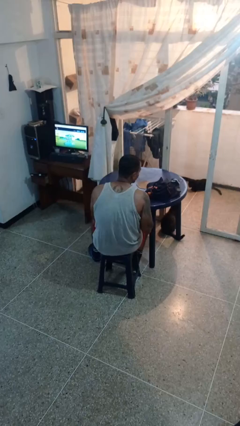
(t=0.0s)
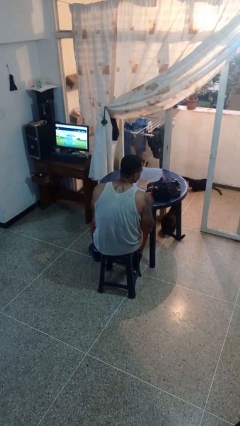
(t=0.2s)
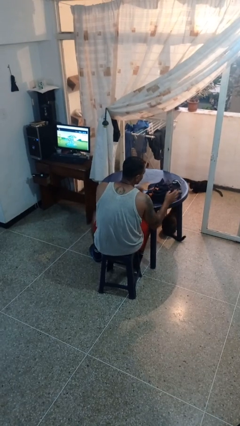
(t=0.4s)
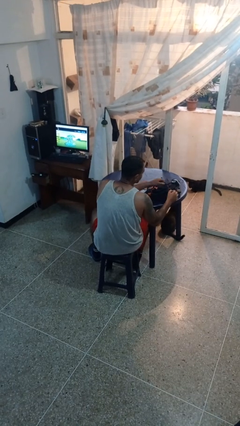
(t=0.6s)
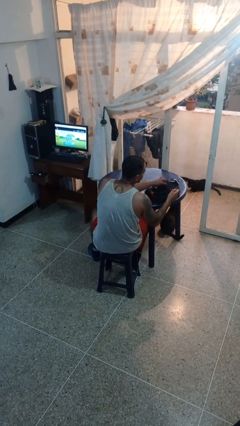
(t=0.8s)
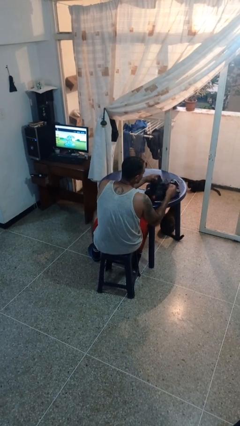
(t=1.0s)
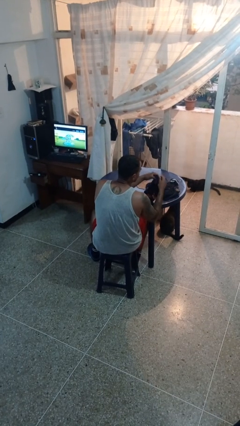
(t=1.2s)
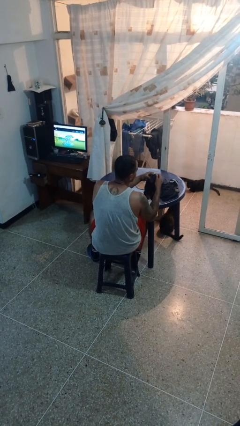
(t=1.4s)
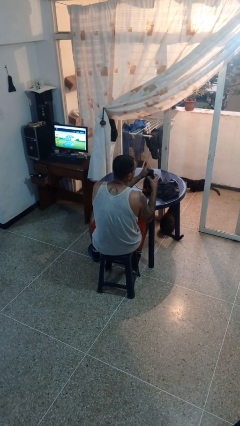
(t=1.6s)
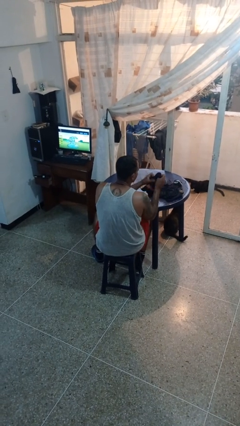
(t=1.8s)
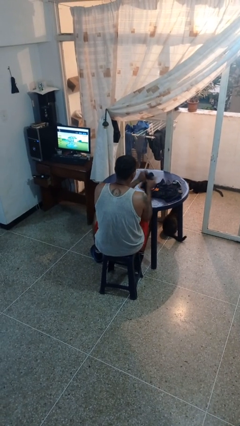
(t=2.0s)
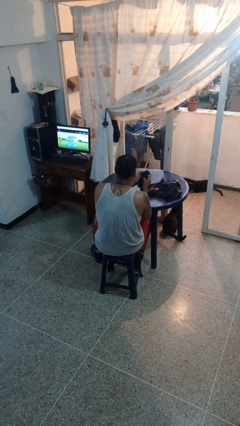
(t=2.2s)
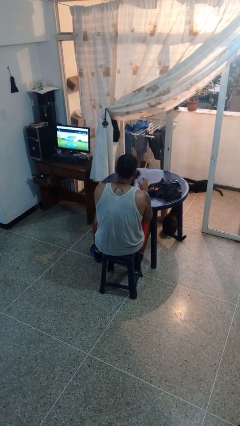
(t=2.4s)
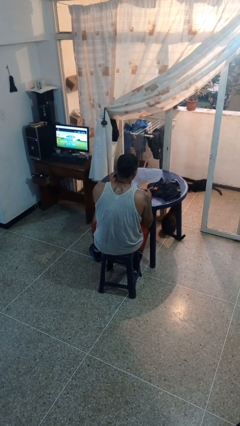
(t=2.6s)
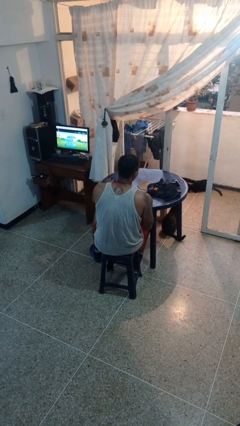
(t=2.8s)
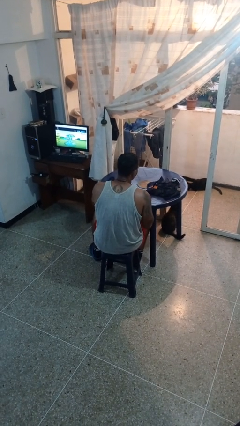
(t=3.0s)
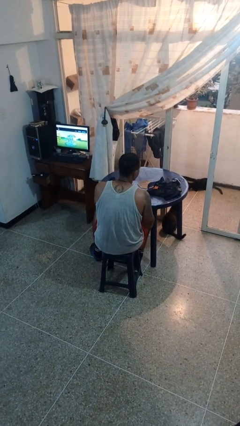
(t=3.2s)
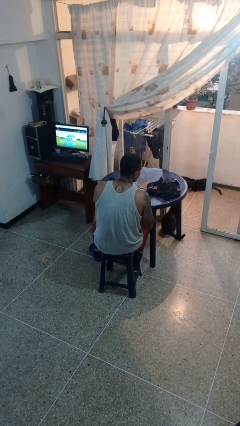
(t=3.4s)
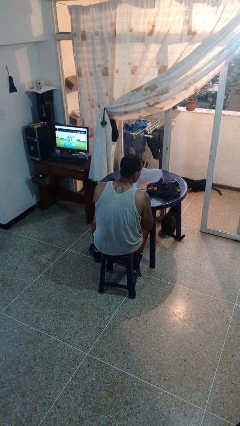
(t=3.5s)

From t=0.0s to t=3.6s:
person folds socks

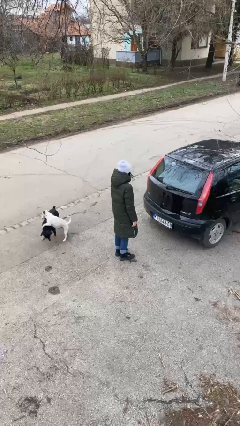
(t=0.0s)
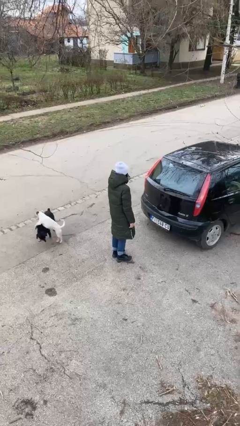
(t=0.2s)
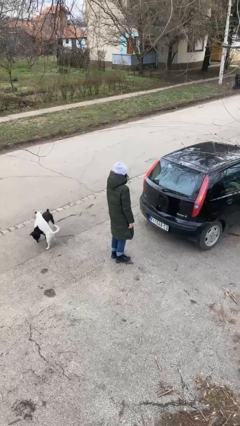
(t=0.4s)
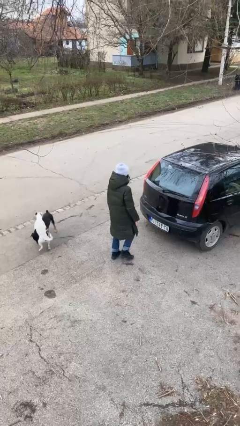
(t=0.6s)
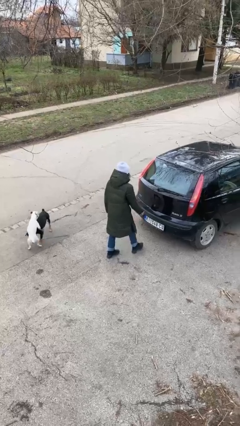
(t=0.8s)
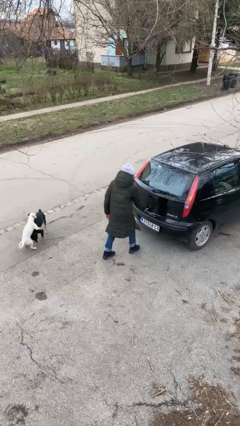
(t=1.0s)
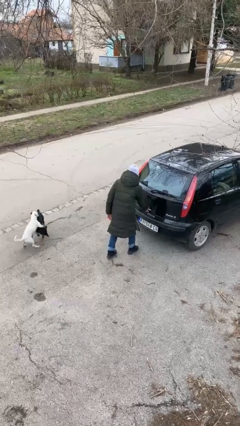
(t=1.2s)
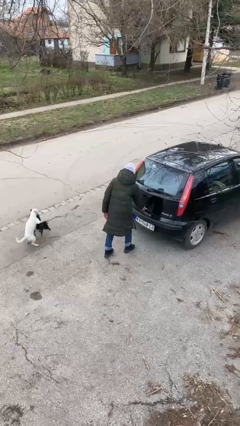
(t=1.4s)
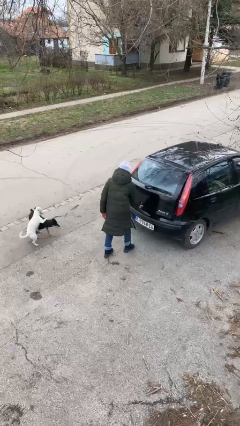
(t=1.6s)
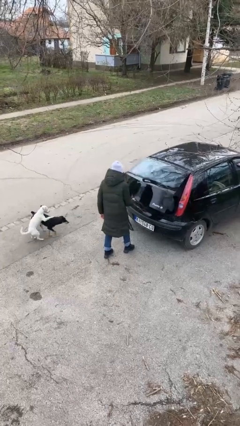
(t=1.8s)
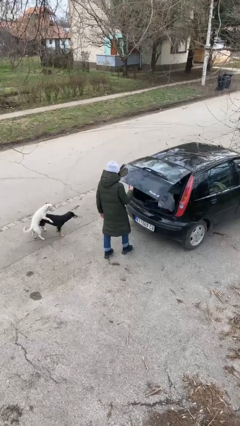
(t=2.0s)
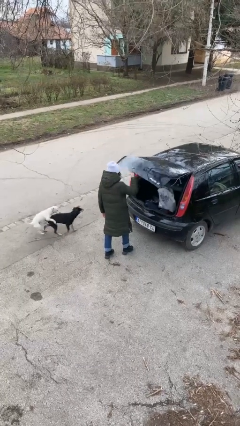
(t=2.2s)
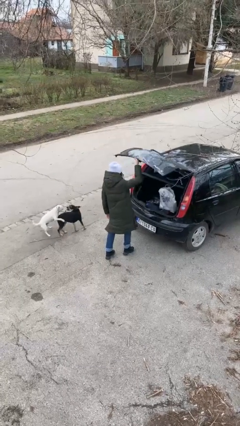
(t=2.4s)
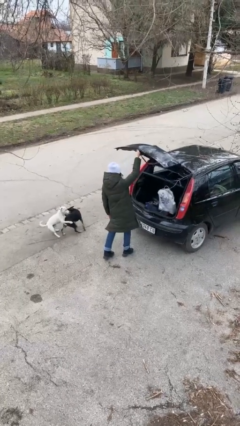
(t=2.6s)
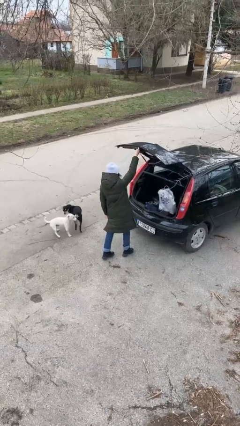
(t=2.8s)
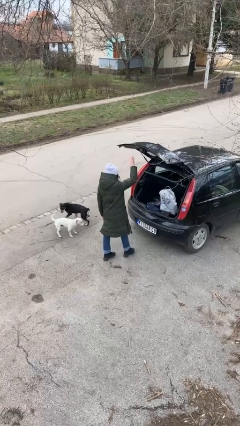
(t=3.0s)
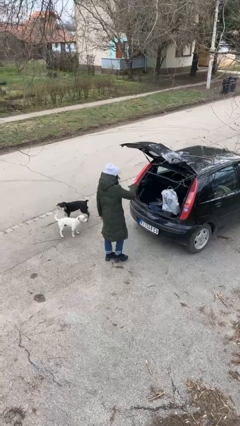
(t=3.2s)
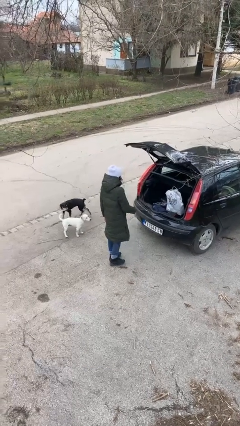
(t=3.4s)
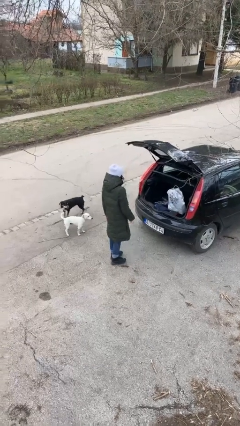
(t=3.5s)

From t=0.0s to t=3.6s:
person opens car trunk

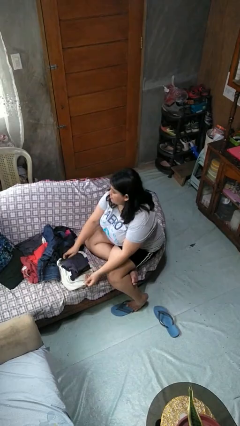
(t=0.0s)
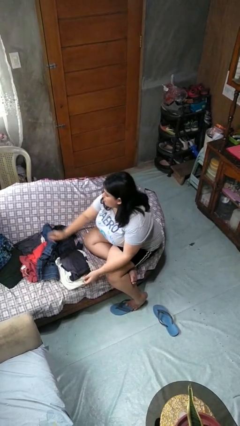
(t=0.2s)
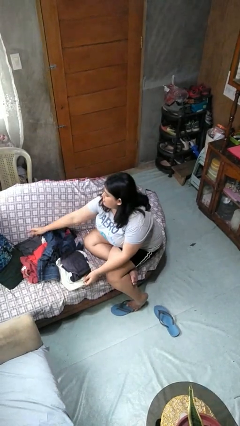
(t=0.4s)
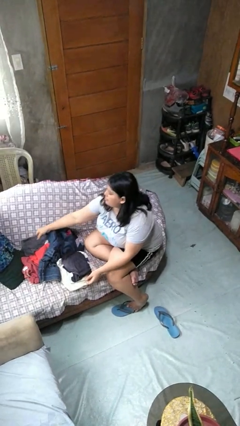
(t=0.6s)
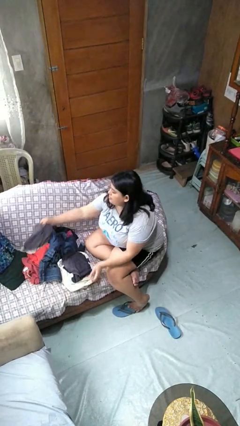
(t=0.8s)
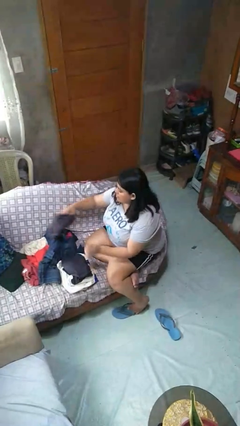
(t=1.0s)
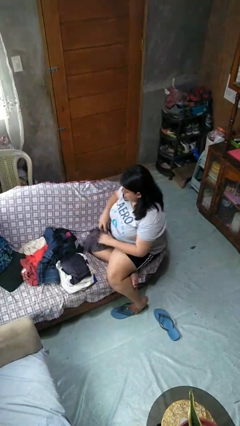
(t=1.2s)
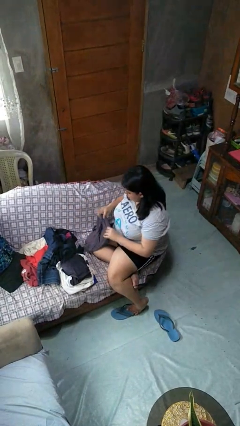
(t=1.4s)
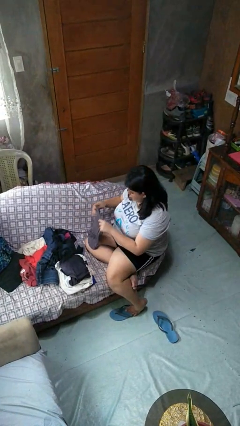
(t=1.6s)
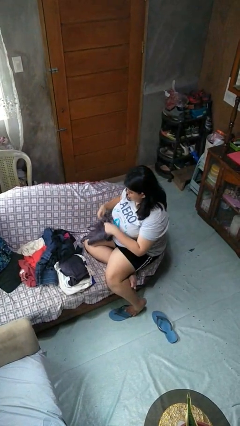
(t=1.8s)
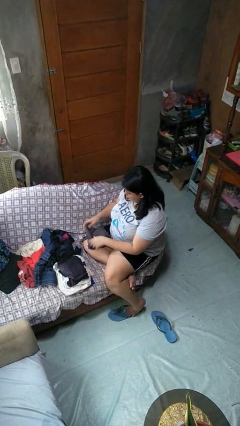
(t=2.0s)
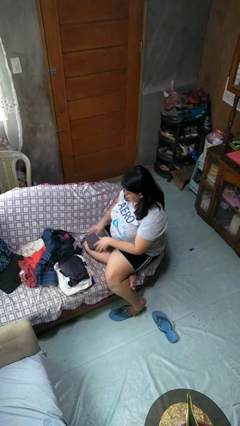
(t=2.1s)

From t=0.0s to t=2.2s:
person folds shirt

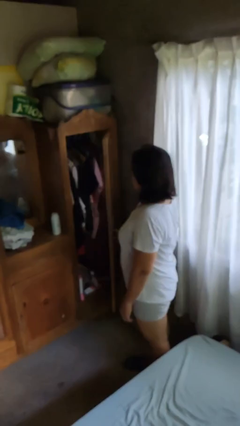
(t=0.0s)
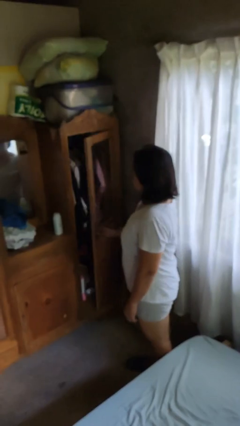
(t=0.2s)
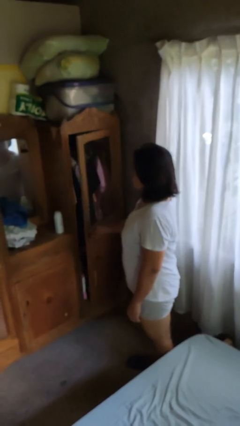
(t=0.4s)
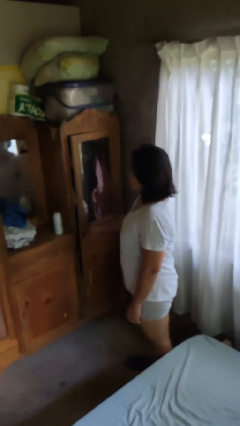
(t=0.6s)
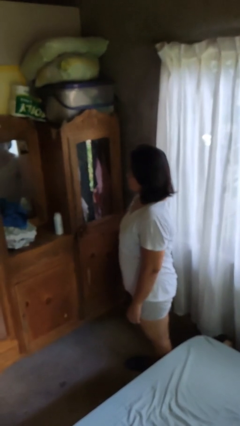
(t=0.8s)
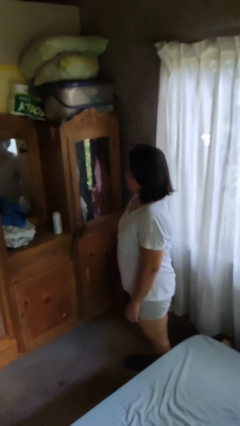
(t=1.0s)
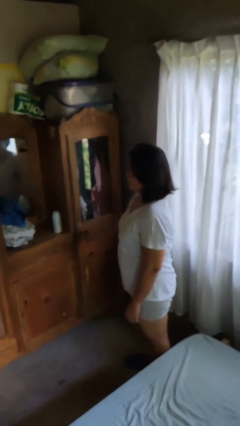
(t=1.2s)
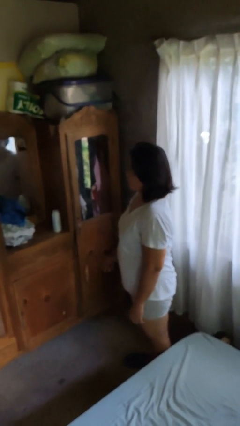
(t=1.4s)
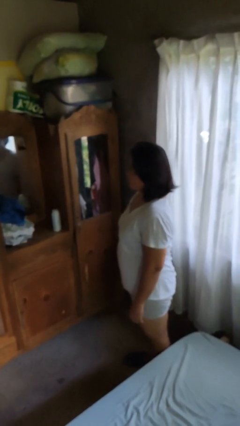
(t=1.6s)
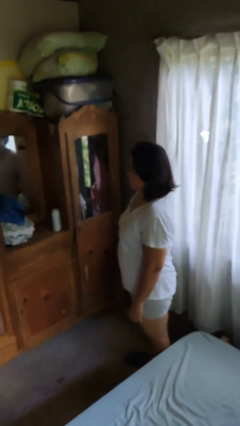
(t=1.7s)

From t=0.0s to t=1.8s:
person closes dresser drawer

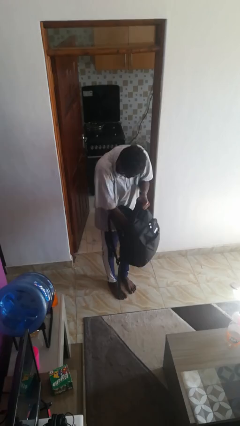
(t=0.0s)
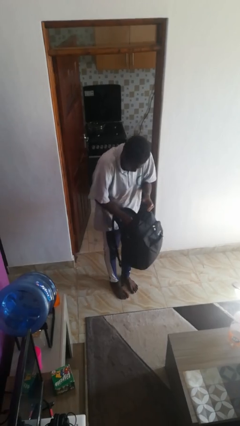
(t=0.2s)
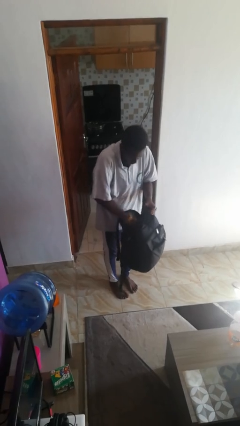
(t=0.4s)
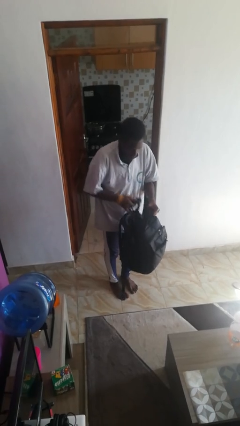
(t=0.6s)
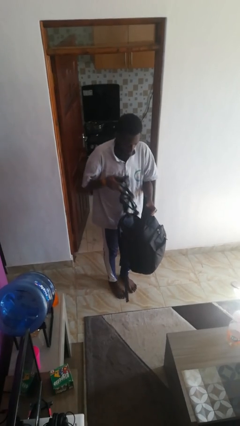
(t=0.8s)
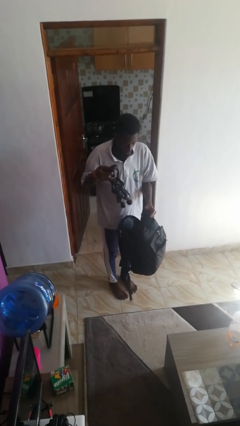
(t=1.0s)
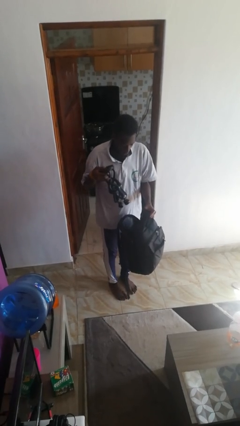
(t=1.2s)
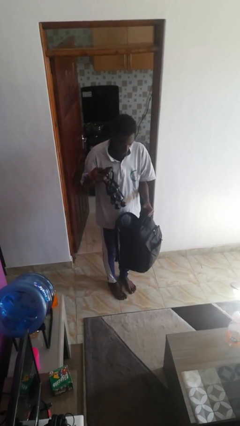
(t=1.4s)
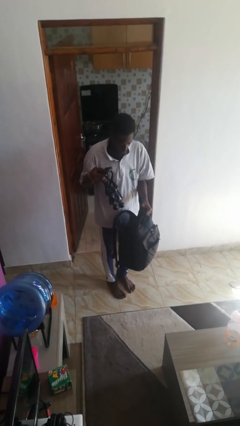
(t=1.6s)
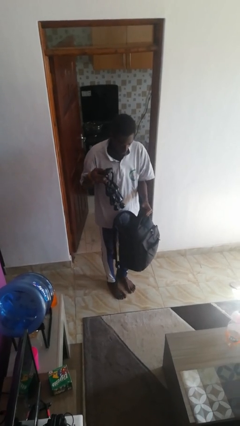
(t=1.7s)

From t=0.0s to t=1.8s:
person takes object from backpack

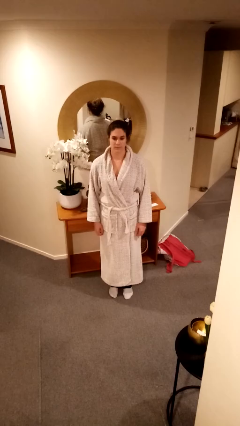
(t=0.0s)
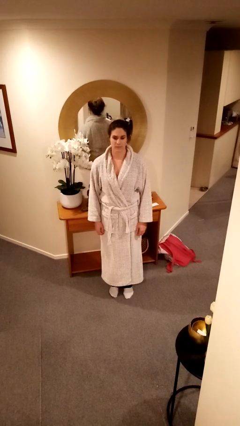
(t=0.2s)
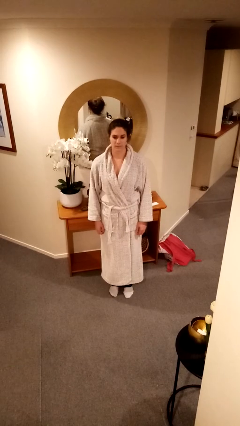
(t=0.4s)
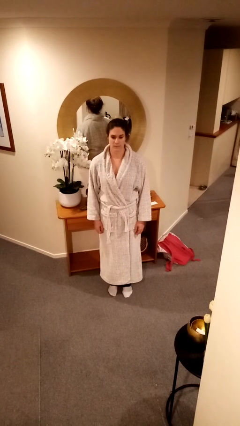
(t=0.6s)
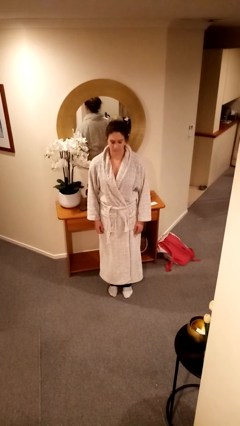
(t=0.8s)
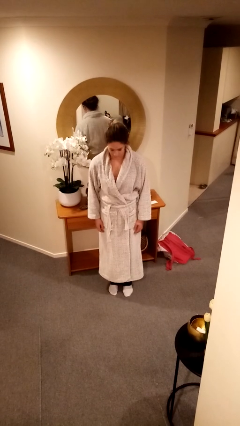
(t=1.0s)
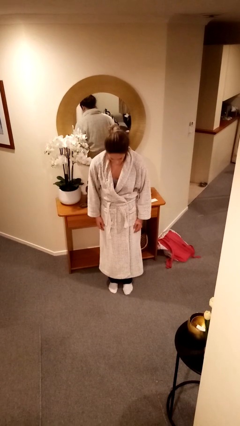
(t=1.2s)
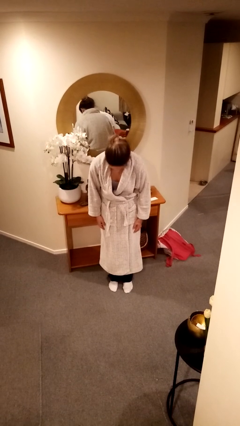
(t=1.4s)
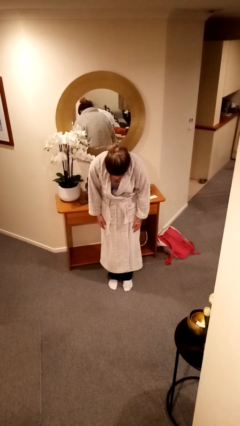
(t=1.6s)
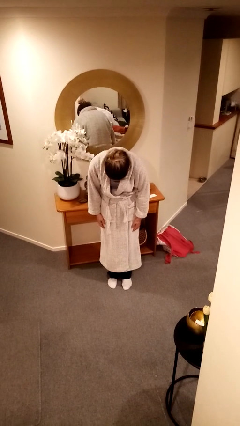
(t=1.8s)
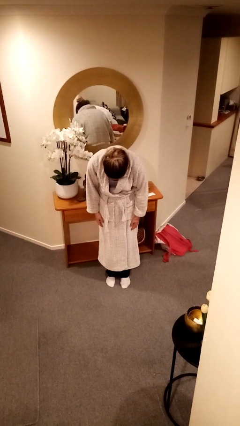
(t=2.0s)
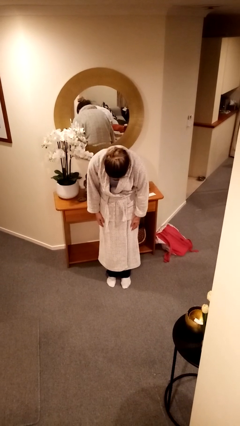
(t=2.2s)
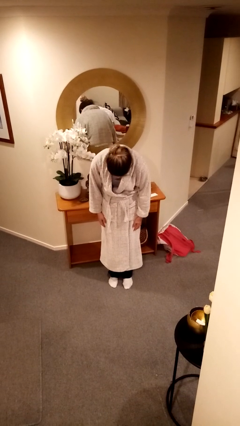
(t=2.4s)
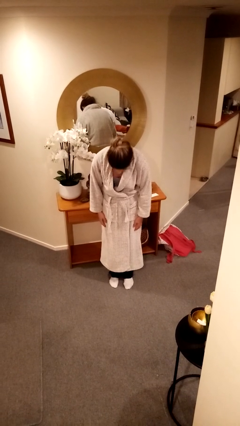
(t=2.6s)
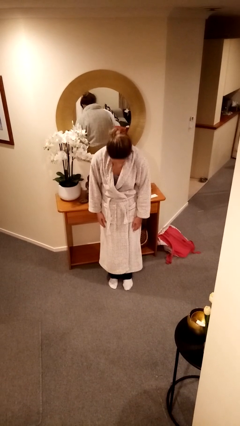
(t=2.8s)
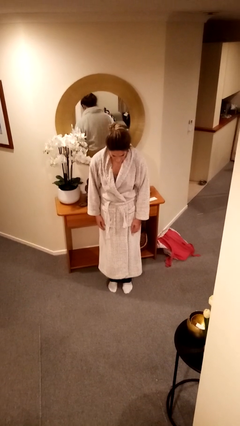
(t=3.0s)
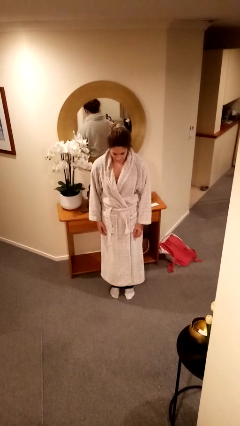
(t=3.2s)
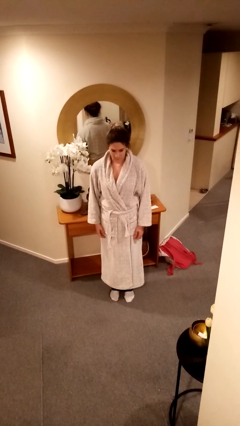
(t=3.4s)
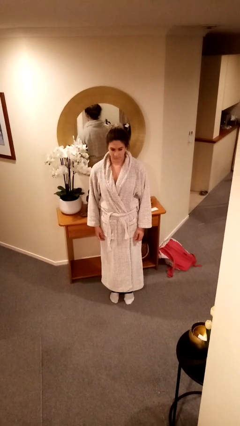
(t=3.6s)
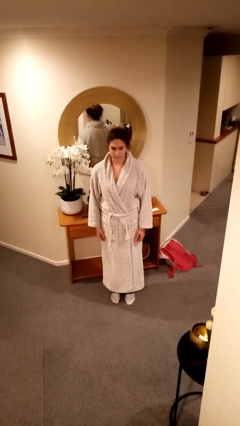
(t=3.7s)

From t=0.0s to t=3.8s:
person bows

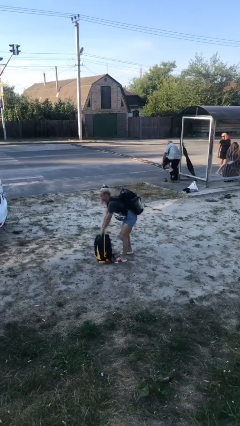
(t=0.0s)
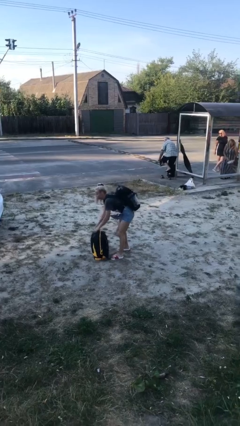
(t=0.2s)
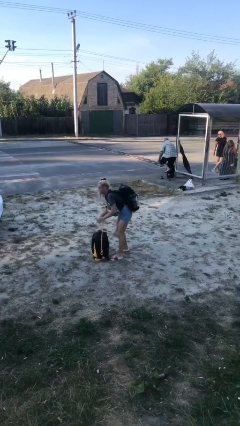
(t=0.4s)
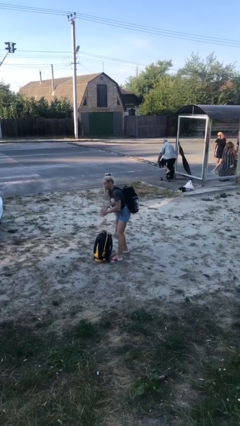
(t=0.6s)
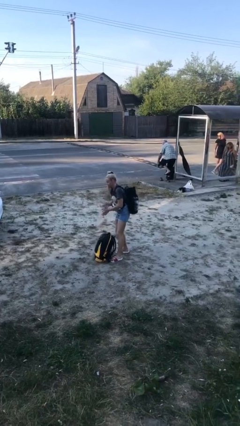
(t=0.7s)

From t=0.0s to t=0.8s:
person puts down object on floor
